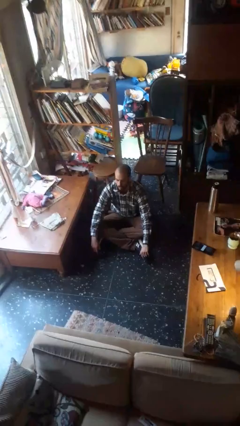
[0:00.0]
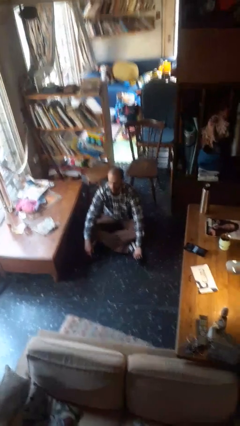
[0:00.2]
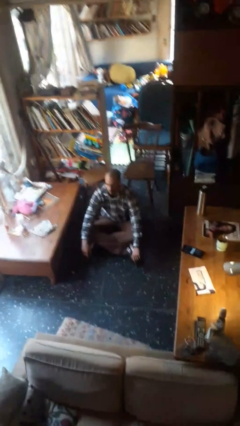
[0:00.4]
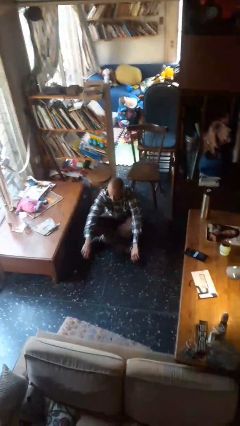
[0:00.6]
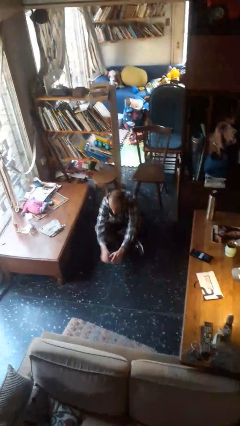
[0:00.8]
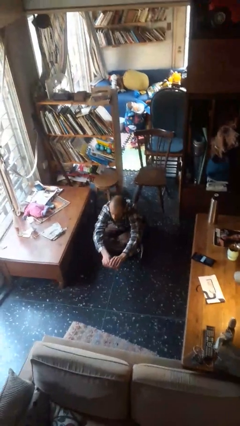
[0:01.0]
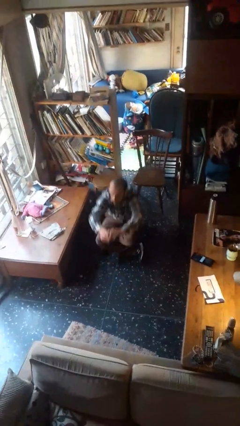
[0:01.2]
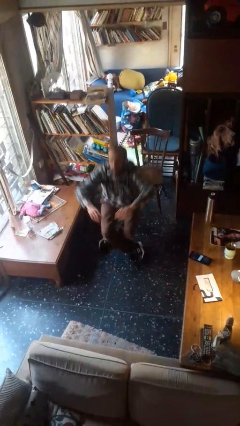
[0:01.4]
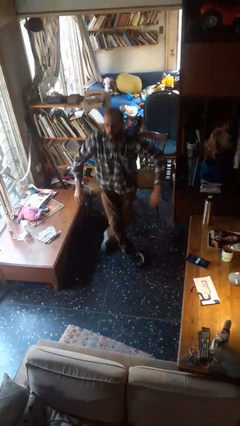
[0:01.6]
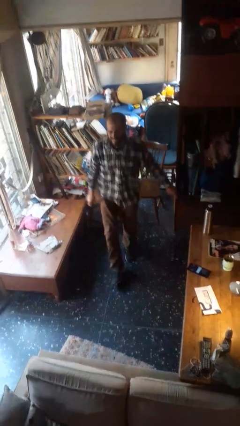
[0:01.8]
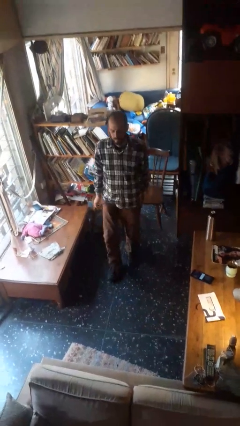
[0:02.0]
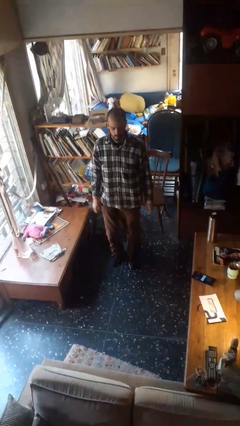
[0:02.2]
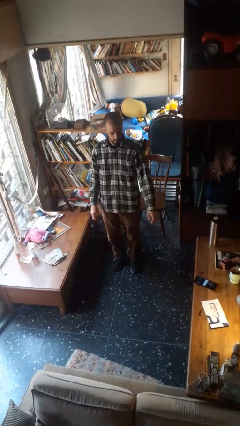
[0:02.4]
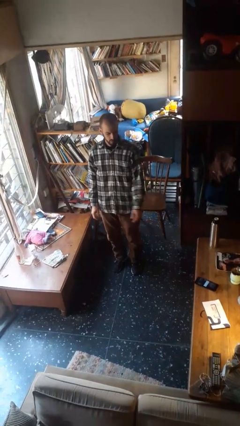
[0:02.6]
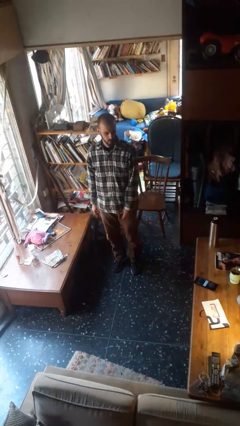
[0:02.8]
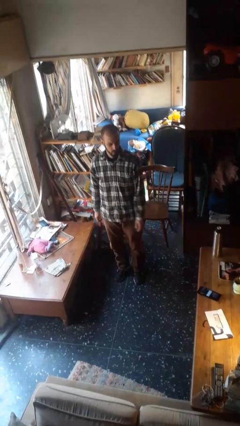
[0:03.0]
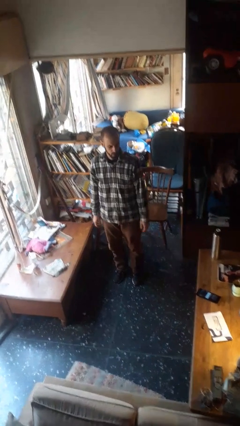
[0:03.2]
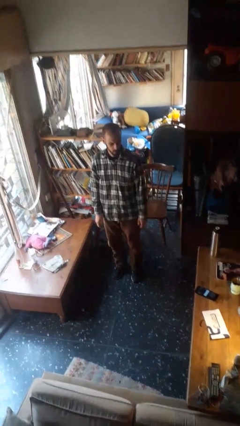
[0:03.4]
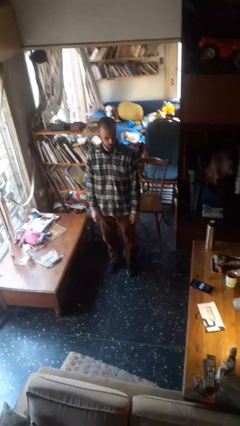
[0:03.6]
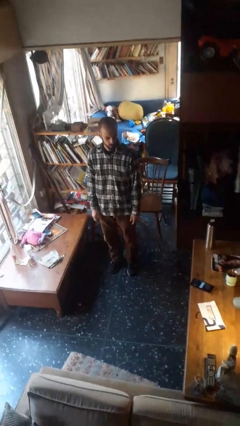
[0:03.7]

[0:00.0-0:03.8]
person stands up from floor

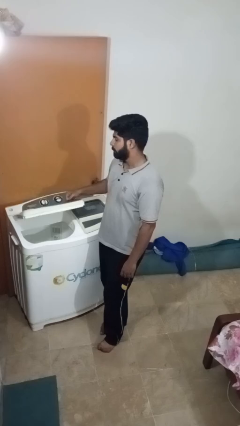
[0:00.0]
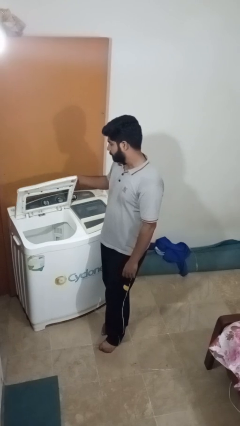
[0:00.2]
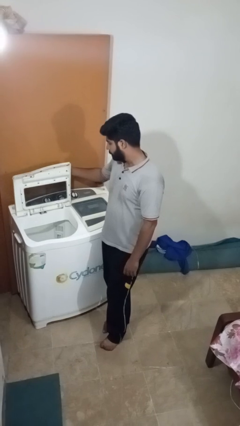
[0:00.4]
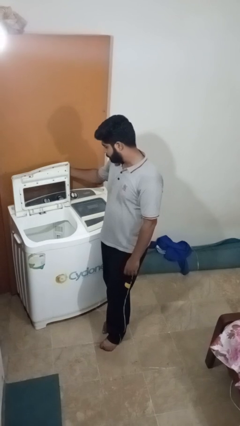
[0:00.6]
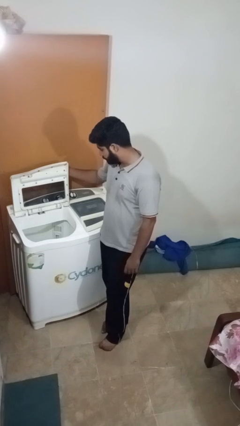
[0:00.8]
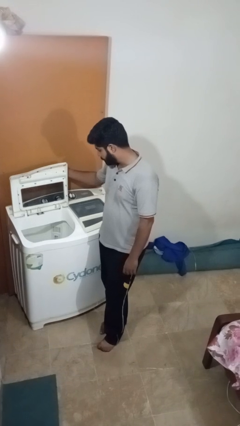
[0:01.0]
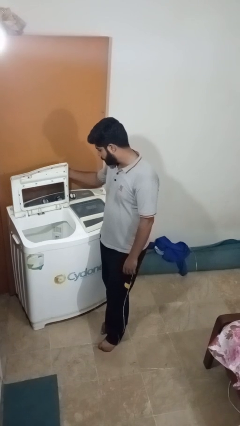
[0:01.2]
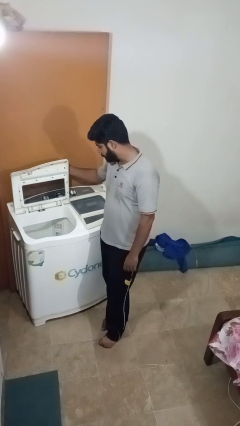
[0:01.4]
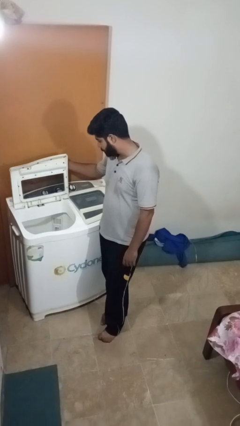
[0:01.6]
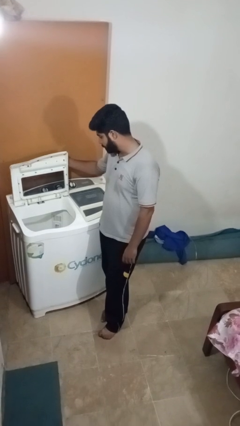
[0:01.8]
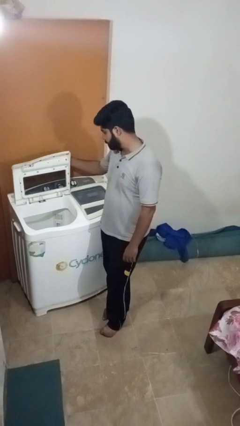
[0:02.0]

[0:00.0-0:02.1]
person opens clothes washer

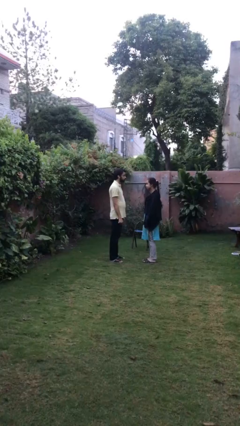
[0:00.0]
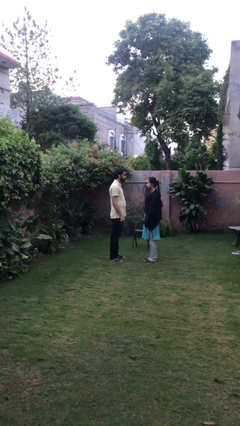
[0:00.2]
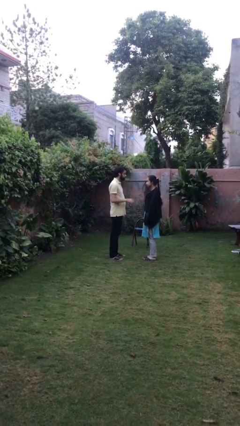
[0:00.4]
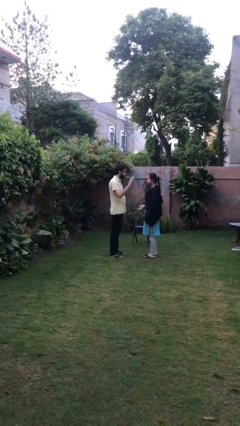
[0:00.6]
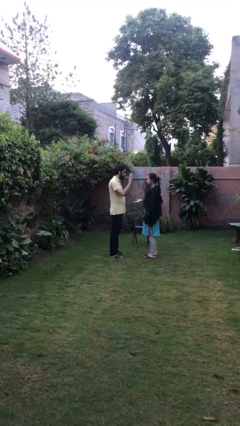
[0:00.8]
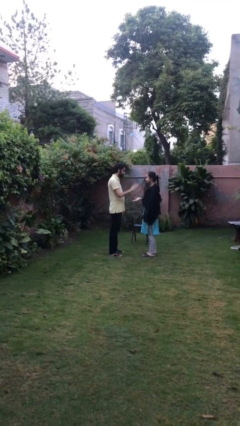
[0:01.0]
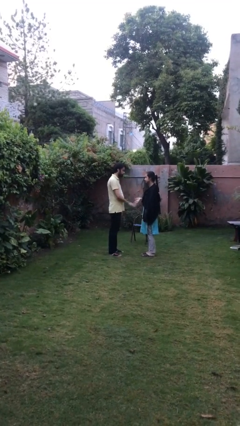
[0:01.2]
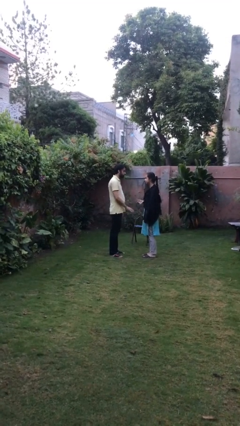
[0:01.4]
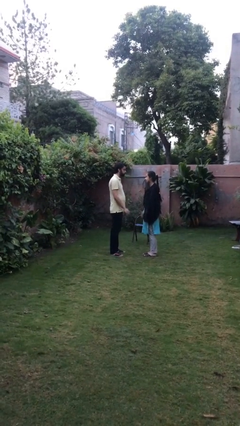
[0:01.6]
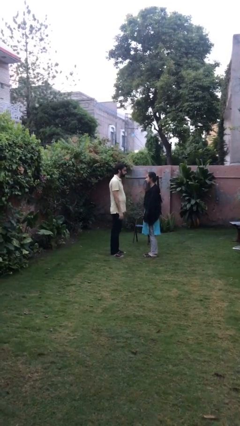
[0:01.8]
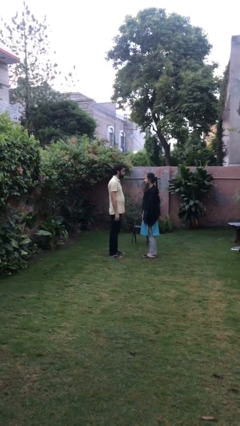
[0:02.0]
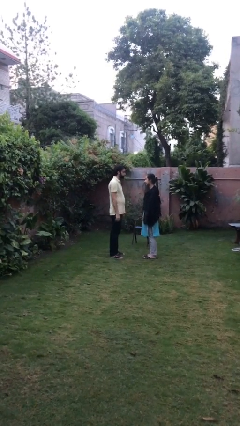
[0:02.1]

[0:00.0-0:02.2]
person highfives hand

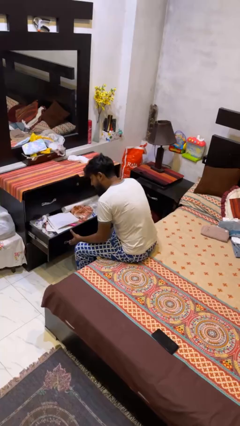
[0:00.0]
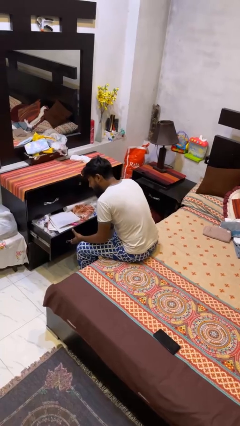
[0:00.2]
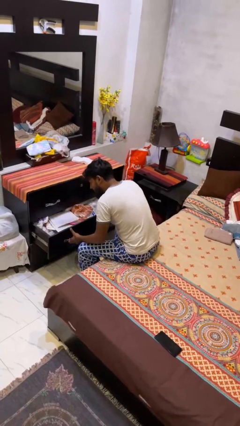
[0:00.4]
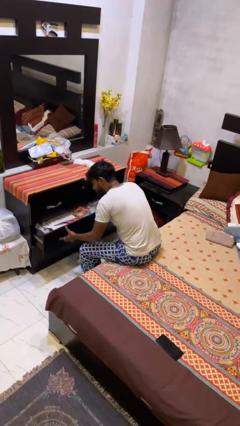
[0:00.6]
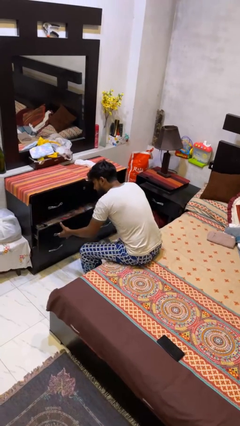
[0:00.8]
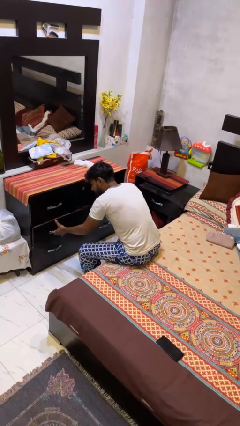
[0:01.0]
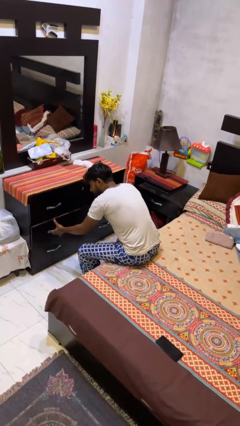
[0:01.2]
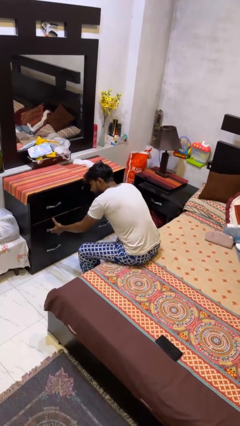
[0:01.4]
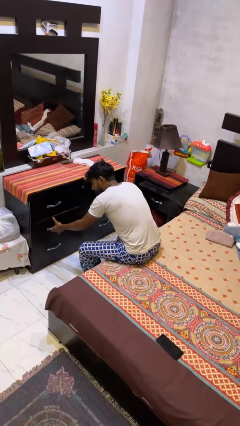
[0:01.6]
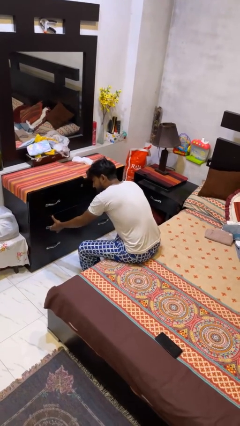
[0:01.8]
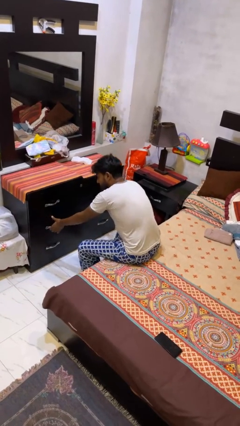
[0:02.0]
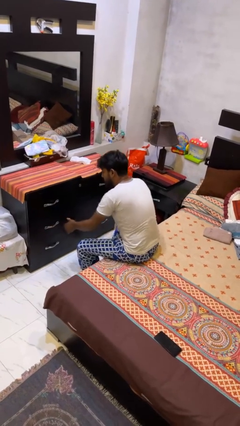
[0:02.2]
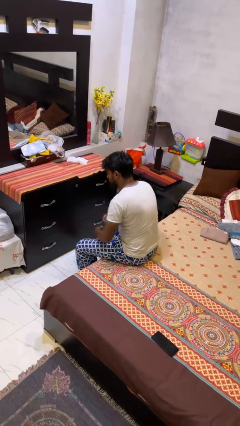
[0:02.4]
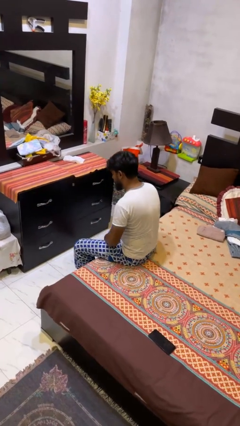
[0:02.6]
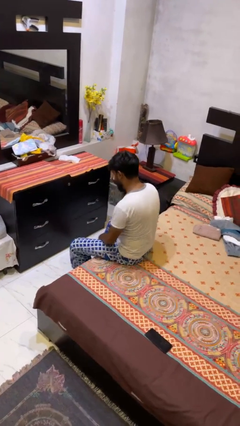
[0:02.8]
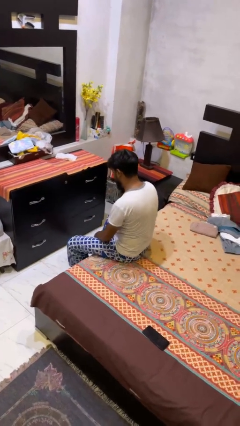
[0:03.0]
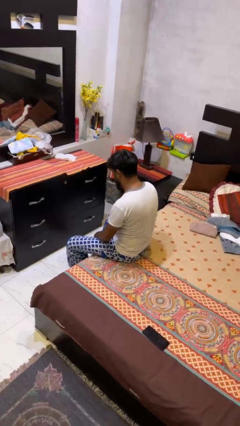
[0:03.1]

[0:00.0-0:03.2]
person closes dresser drawer

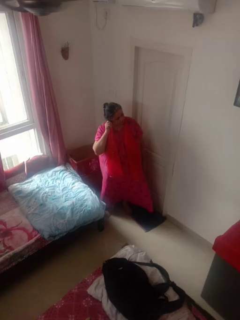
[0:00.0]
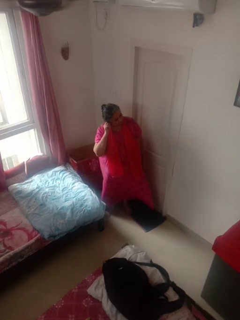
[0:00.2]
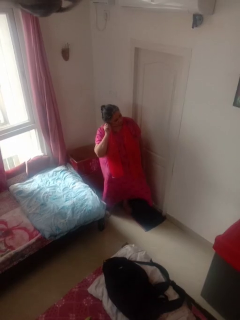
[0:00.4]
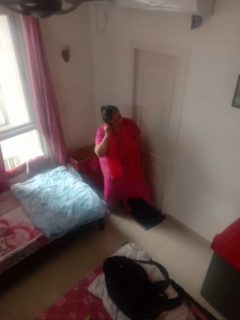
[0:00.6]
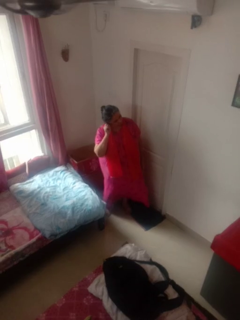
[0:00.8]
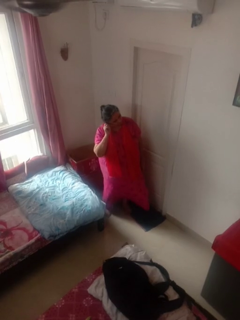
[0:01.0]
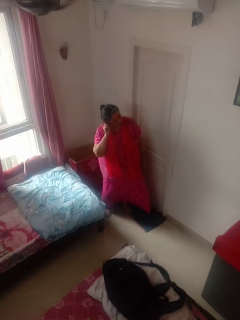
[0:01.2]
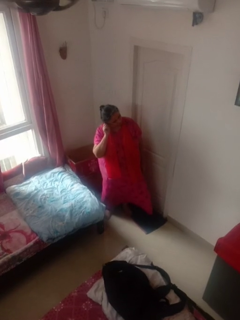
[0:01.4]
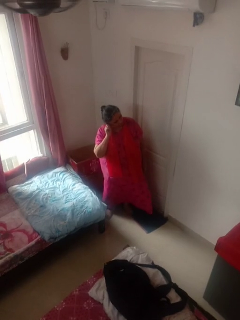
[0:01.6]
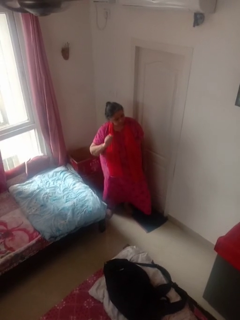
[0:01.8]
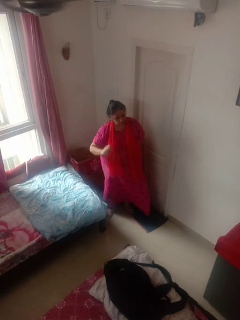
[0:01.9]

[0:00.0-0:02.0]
person touches earlobe

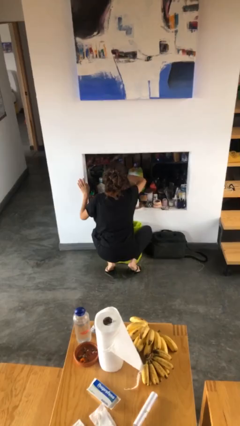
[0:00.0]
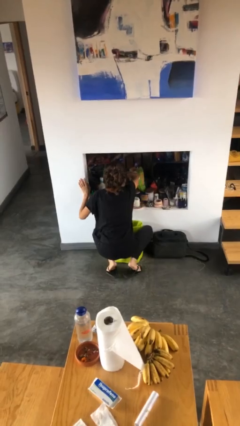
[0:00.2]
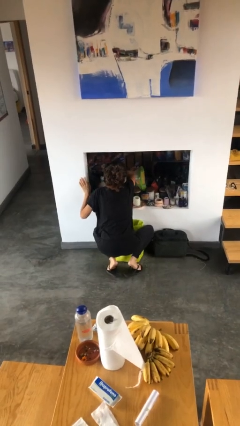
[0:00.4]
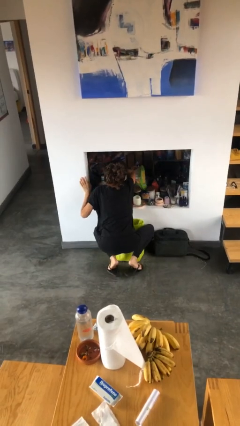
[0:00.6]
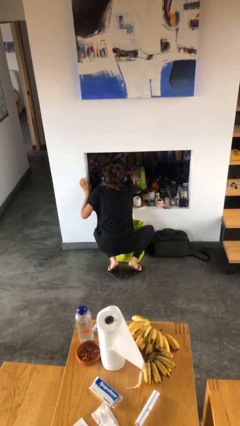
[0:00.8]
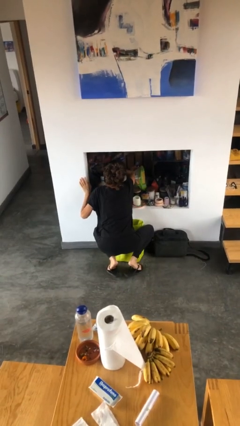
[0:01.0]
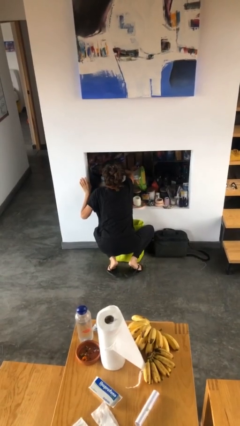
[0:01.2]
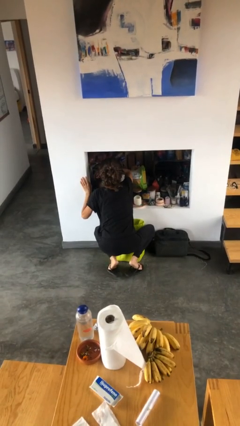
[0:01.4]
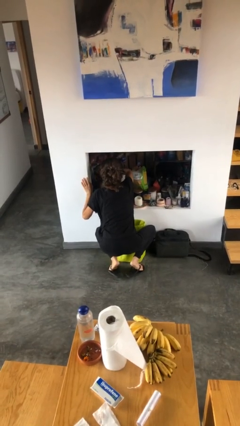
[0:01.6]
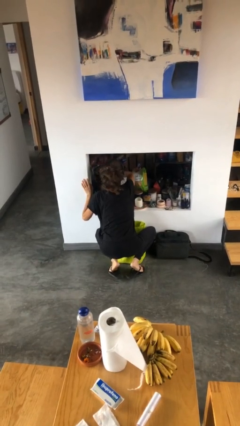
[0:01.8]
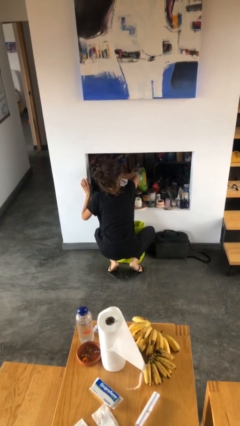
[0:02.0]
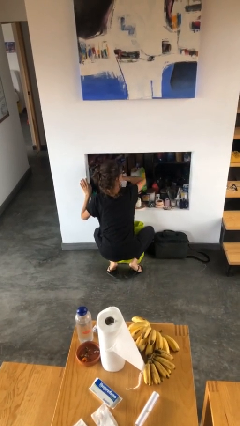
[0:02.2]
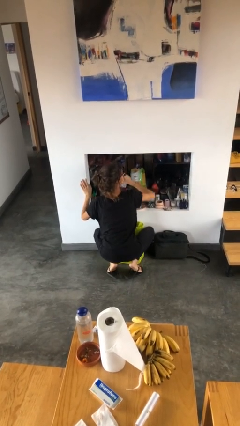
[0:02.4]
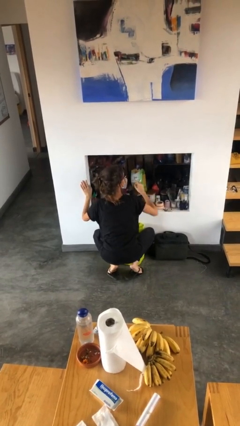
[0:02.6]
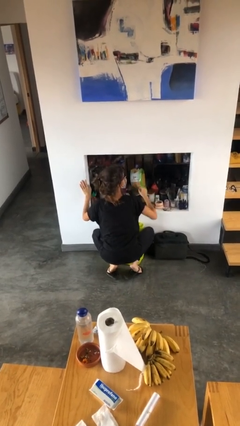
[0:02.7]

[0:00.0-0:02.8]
person searches in cabinet

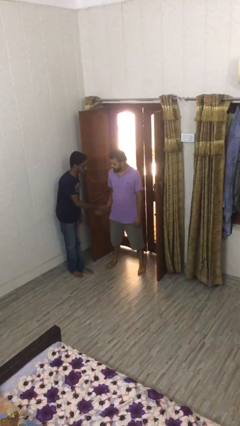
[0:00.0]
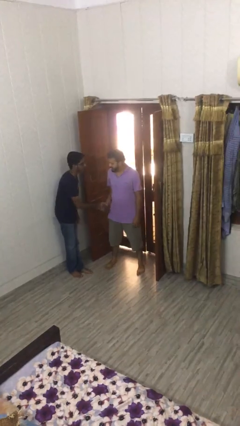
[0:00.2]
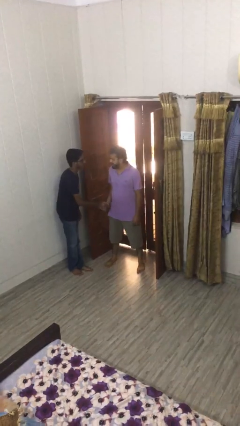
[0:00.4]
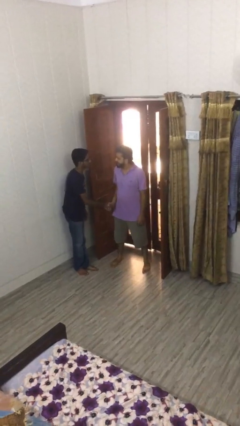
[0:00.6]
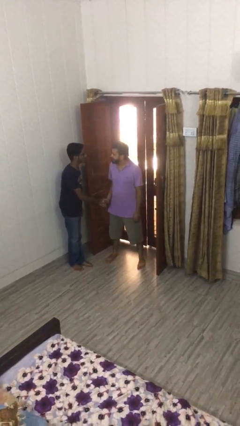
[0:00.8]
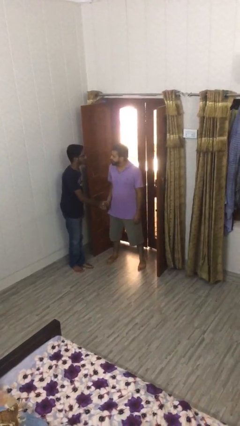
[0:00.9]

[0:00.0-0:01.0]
person shakes hand

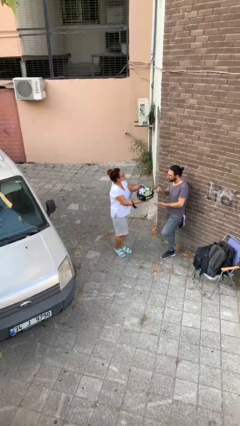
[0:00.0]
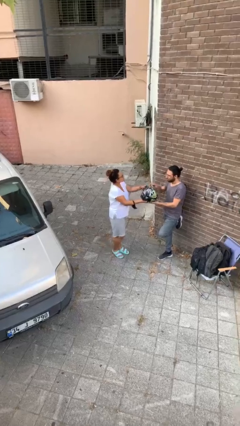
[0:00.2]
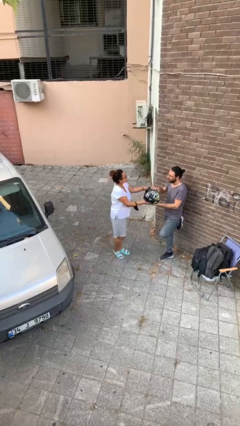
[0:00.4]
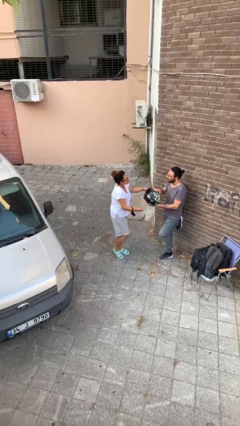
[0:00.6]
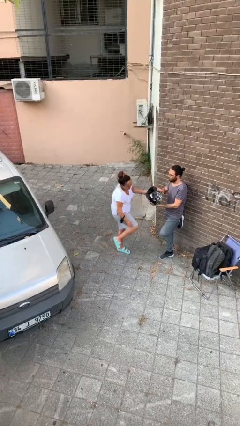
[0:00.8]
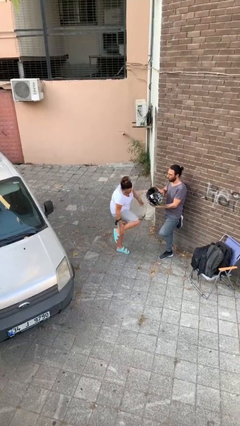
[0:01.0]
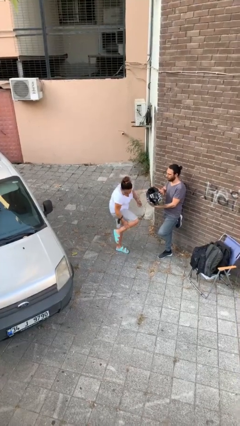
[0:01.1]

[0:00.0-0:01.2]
person transfers object to person
